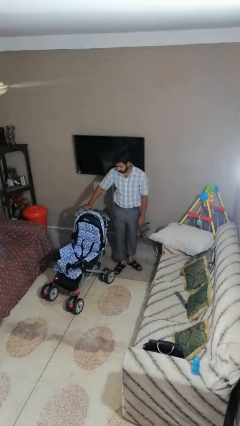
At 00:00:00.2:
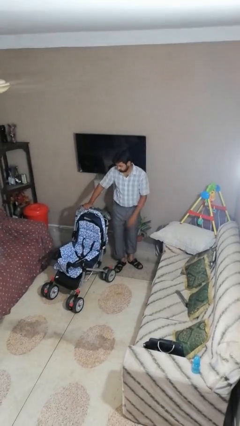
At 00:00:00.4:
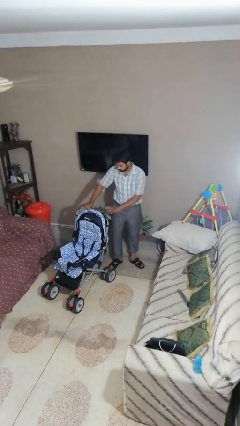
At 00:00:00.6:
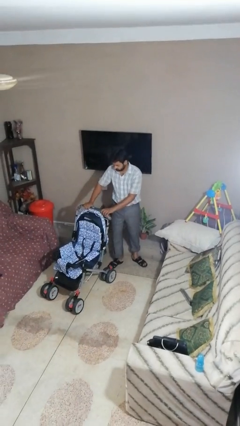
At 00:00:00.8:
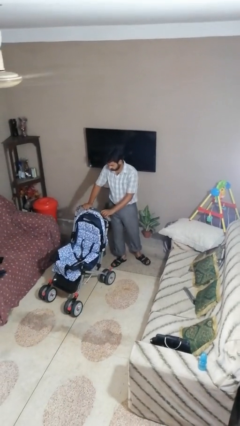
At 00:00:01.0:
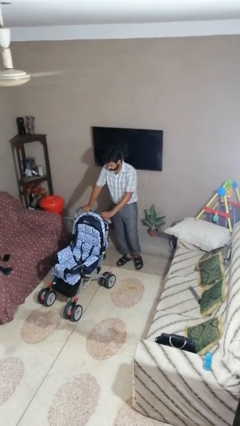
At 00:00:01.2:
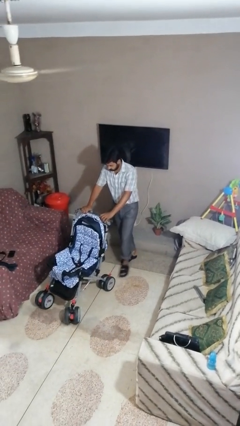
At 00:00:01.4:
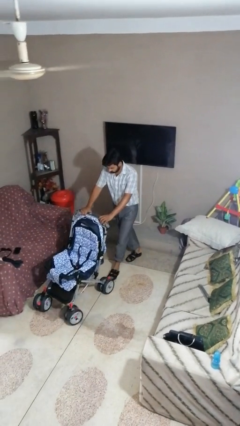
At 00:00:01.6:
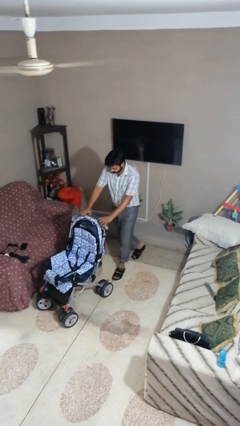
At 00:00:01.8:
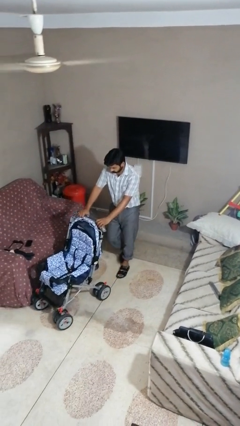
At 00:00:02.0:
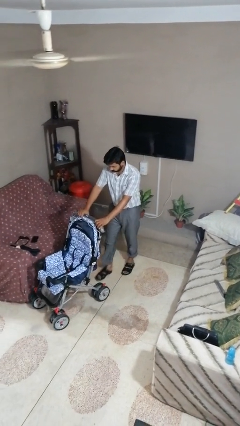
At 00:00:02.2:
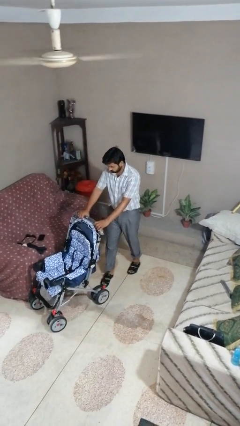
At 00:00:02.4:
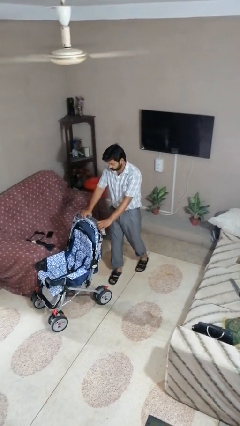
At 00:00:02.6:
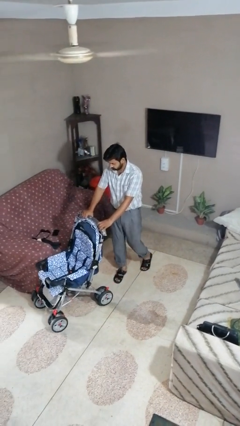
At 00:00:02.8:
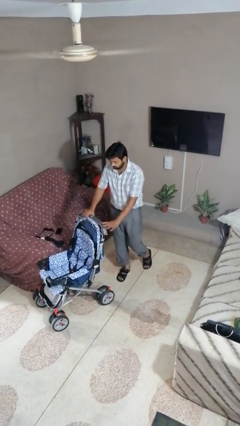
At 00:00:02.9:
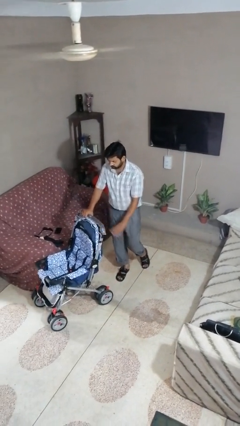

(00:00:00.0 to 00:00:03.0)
person pushes wheeled cart

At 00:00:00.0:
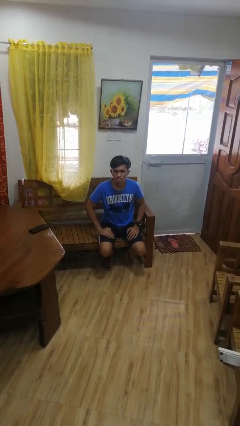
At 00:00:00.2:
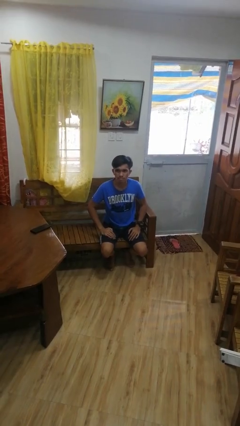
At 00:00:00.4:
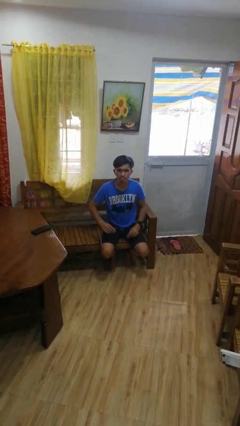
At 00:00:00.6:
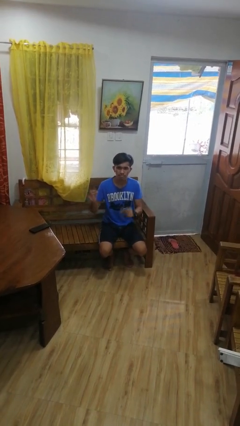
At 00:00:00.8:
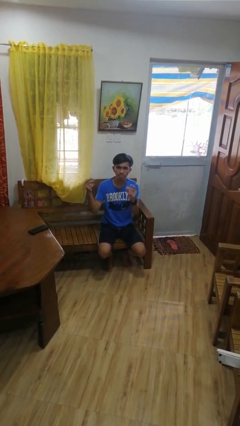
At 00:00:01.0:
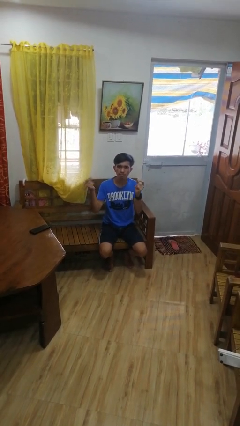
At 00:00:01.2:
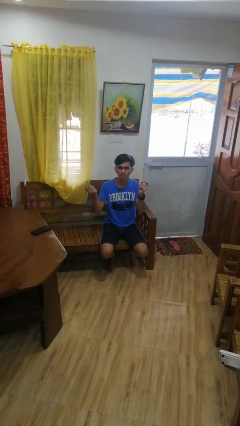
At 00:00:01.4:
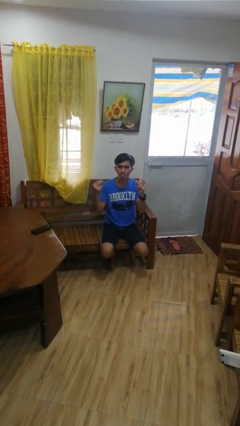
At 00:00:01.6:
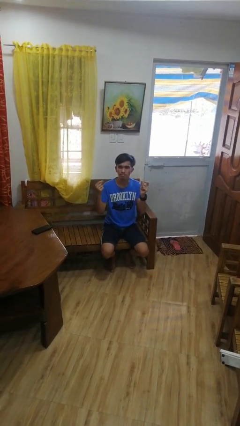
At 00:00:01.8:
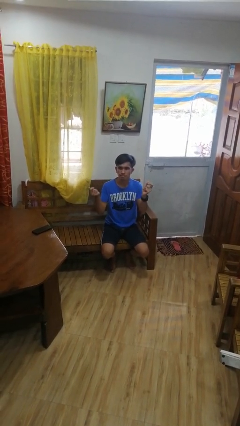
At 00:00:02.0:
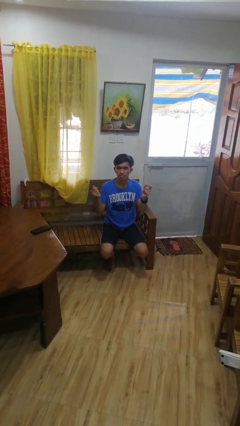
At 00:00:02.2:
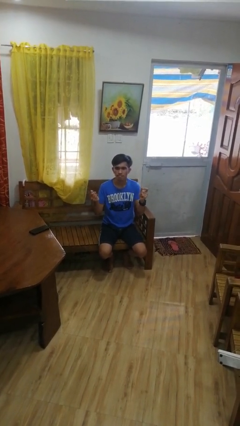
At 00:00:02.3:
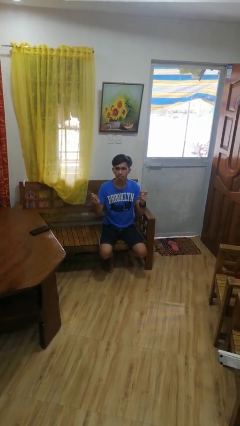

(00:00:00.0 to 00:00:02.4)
person snaps fingers

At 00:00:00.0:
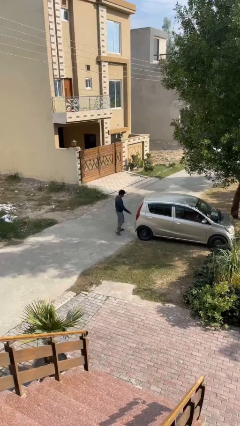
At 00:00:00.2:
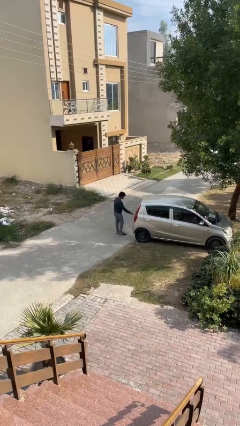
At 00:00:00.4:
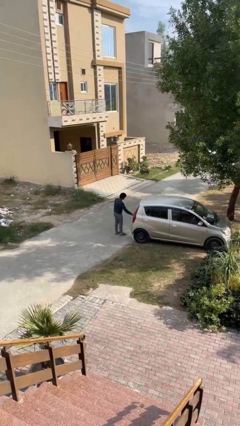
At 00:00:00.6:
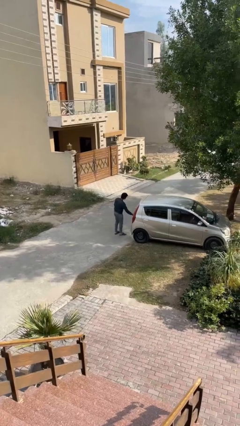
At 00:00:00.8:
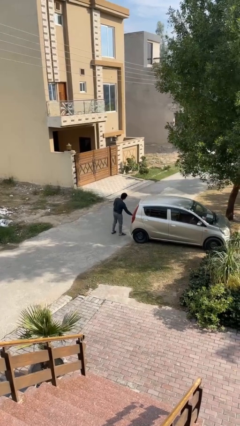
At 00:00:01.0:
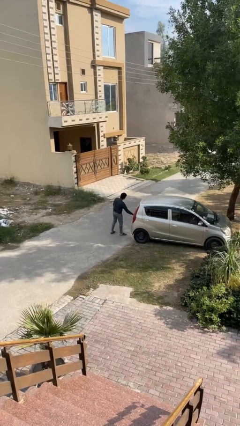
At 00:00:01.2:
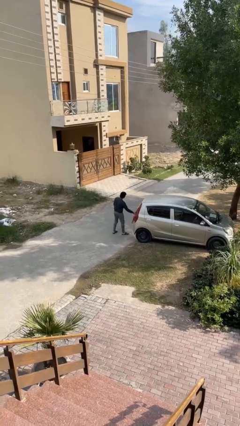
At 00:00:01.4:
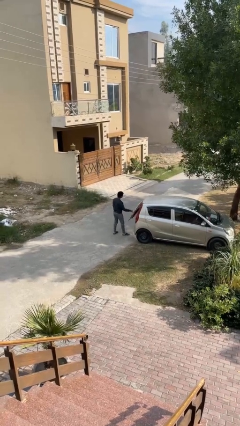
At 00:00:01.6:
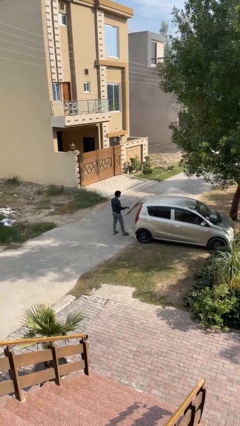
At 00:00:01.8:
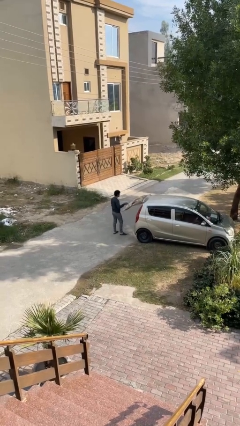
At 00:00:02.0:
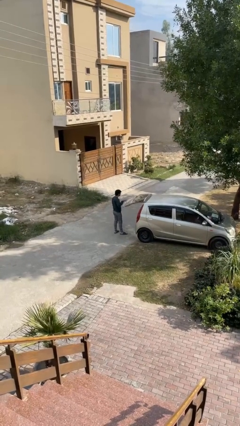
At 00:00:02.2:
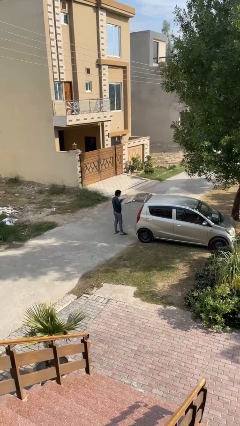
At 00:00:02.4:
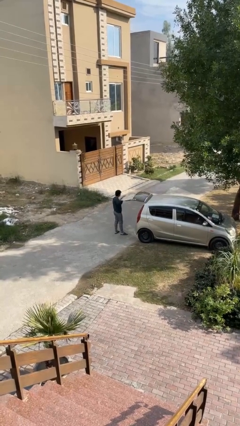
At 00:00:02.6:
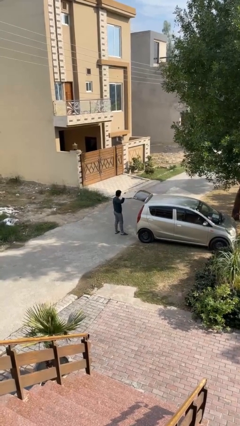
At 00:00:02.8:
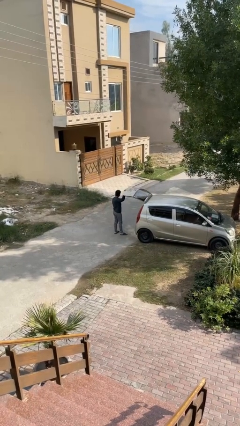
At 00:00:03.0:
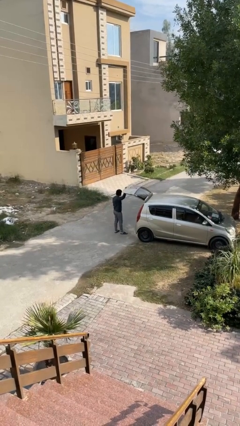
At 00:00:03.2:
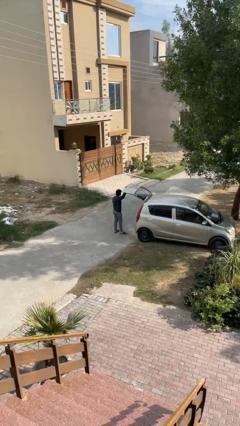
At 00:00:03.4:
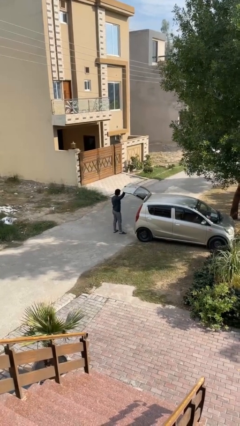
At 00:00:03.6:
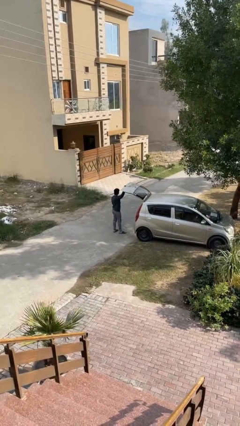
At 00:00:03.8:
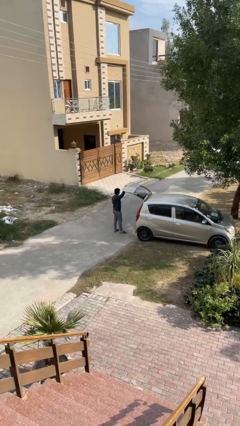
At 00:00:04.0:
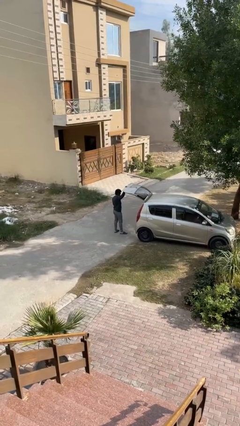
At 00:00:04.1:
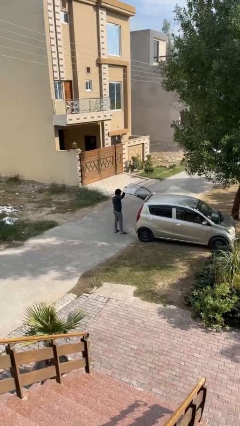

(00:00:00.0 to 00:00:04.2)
person opens car trunk

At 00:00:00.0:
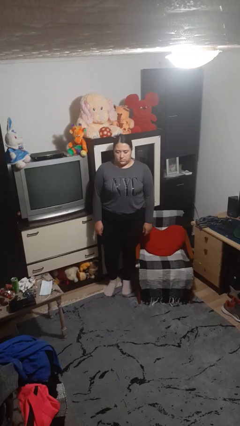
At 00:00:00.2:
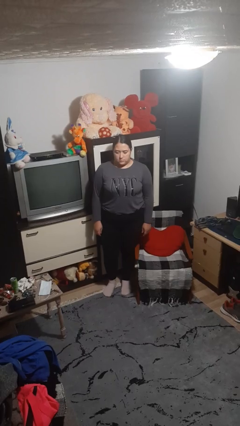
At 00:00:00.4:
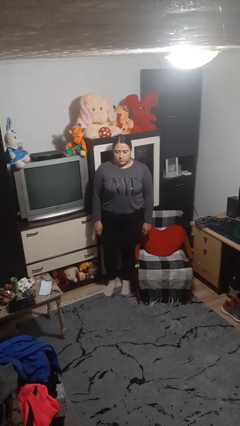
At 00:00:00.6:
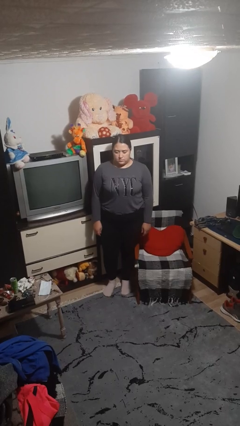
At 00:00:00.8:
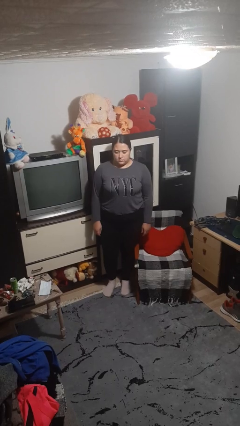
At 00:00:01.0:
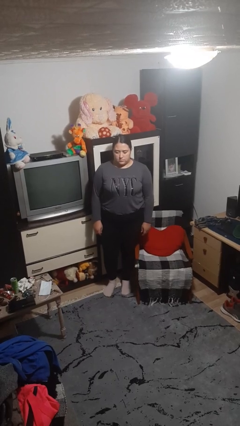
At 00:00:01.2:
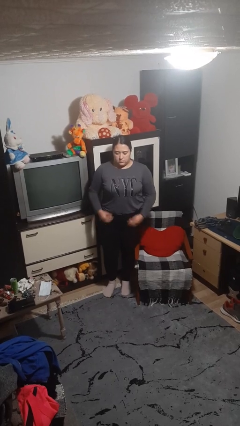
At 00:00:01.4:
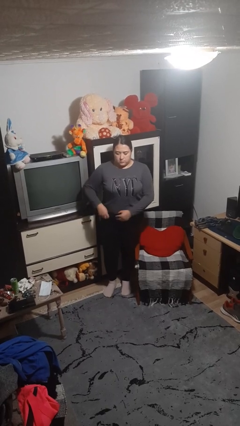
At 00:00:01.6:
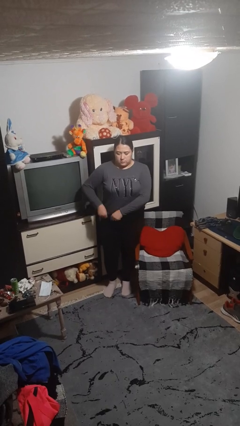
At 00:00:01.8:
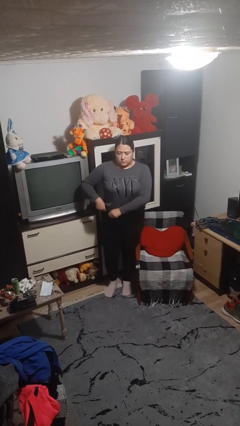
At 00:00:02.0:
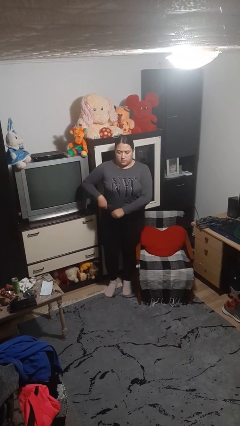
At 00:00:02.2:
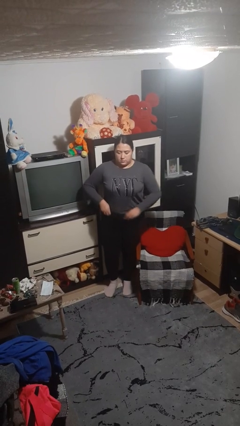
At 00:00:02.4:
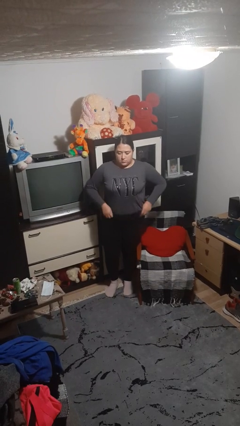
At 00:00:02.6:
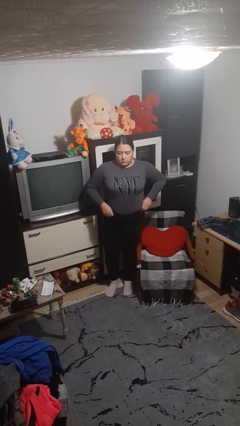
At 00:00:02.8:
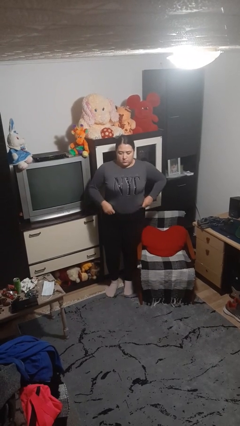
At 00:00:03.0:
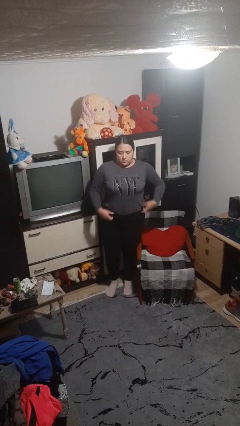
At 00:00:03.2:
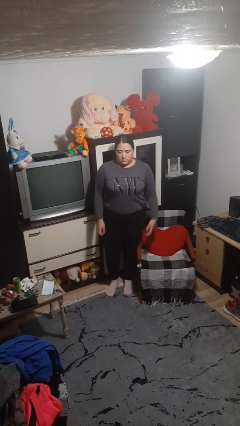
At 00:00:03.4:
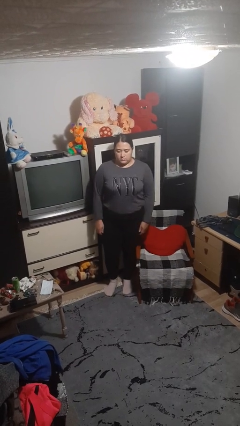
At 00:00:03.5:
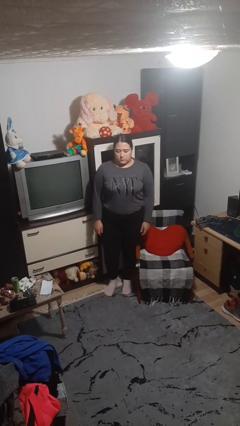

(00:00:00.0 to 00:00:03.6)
person hikes up pants

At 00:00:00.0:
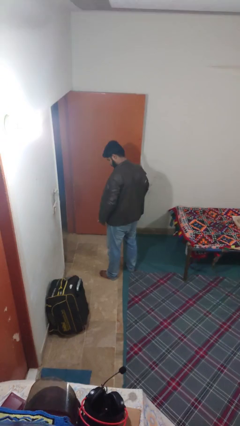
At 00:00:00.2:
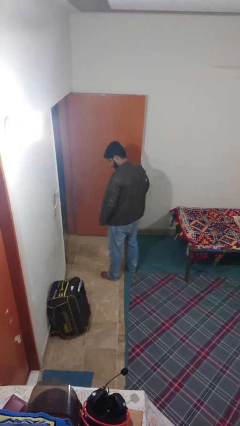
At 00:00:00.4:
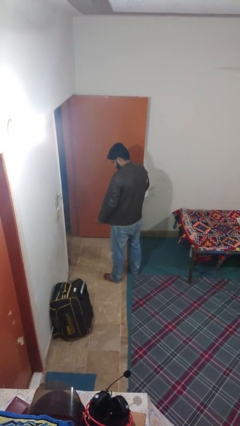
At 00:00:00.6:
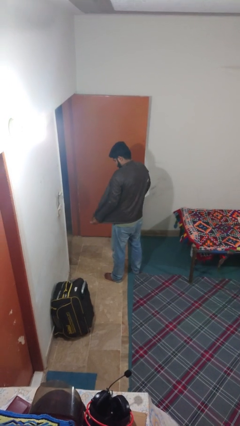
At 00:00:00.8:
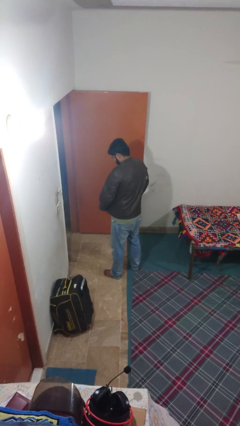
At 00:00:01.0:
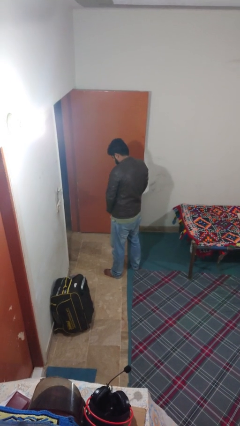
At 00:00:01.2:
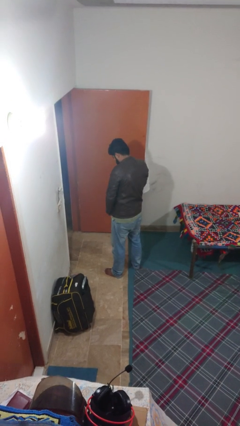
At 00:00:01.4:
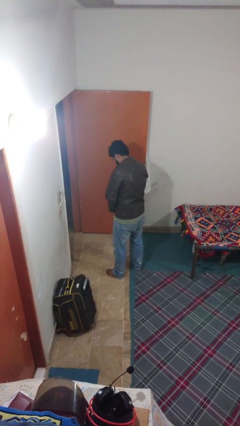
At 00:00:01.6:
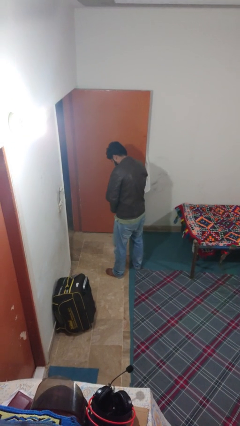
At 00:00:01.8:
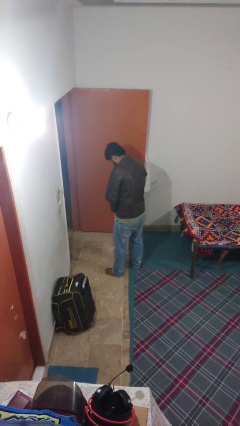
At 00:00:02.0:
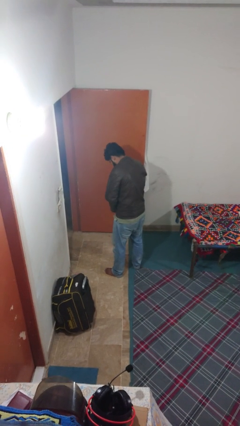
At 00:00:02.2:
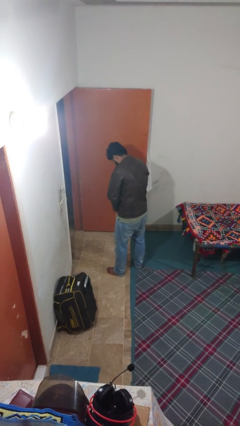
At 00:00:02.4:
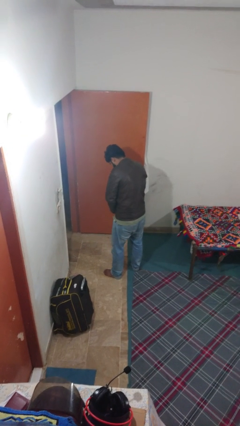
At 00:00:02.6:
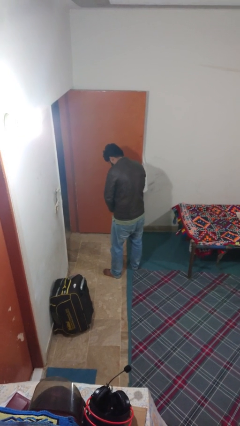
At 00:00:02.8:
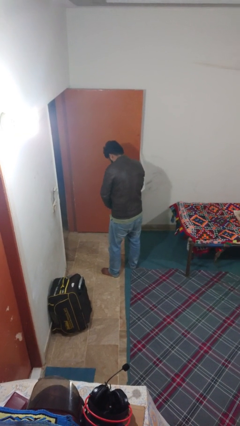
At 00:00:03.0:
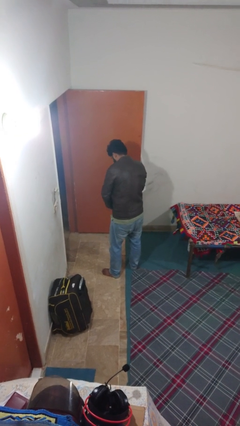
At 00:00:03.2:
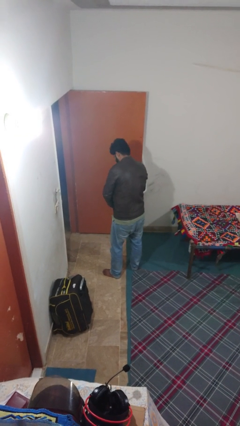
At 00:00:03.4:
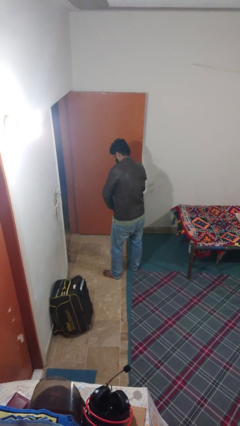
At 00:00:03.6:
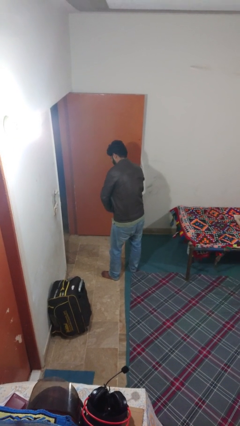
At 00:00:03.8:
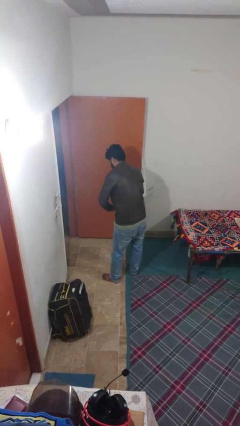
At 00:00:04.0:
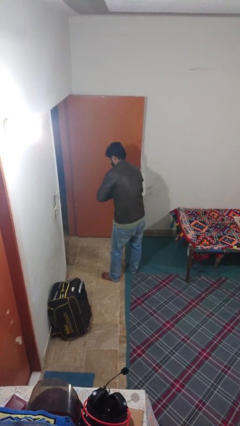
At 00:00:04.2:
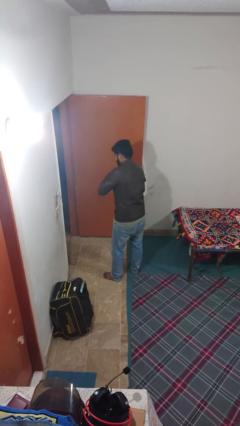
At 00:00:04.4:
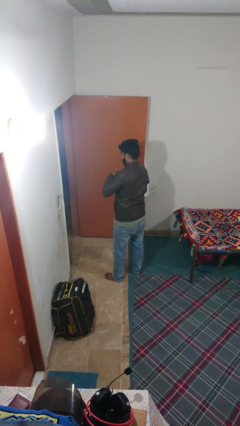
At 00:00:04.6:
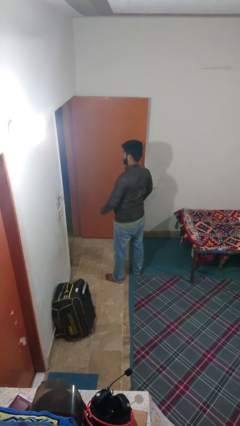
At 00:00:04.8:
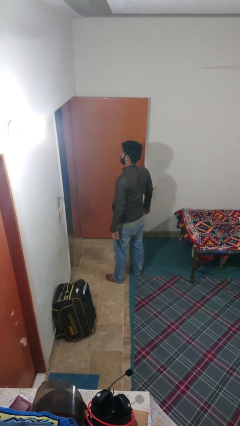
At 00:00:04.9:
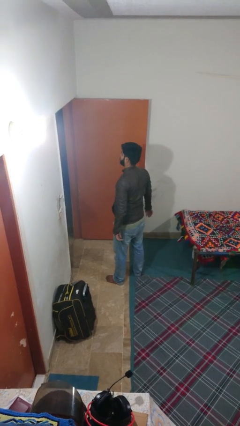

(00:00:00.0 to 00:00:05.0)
person zips up jacket
